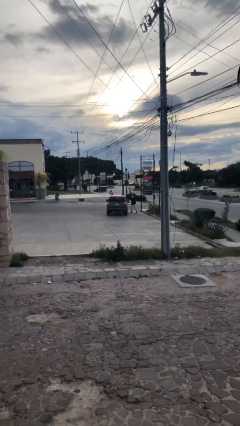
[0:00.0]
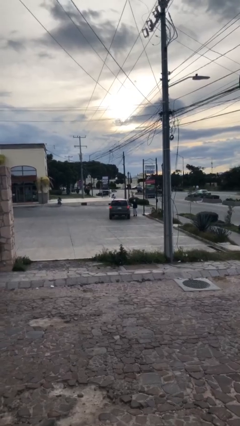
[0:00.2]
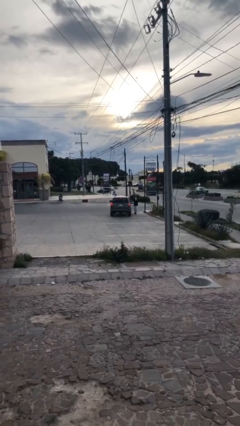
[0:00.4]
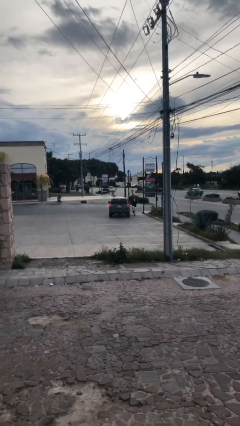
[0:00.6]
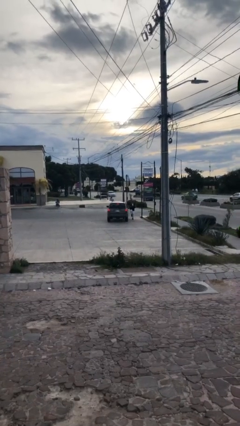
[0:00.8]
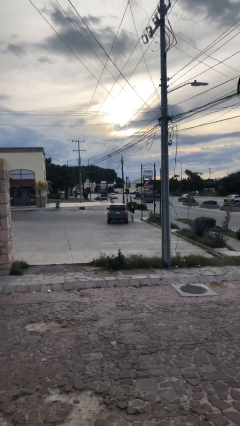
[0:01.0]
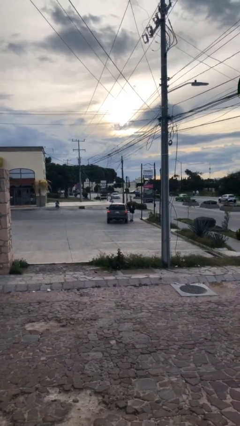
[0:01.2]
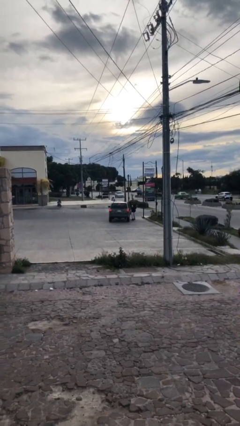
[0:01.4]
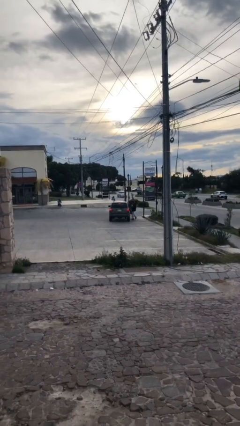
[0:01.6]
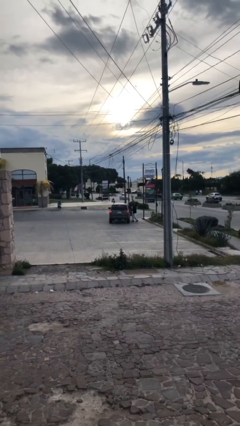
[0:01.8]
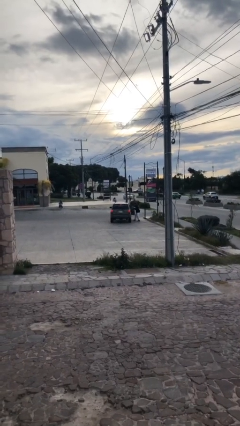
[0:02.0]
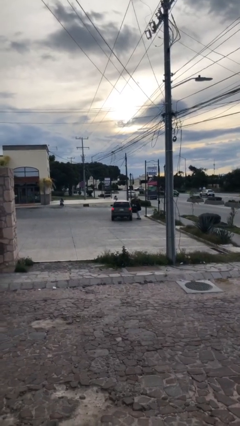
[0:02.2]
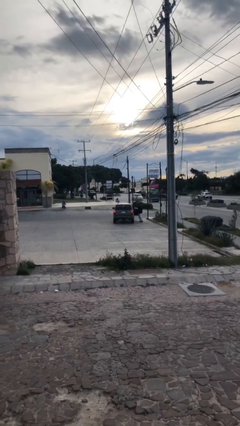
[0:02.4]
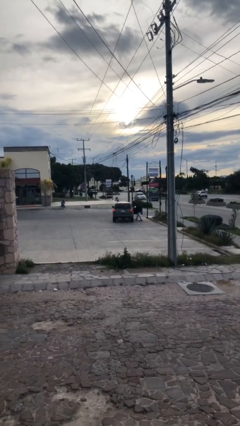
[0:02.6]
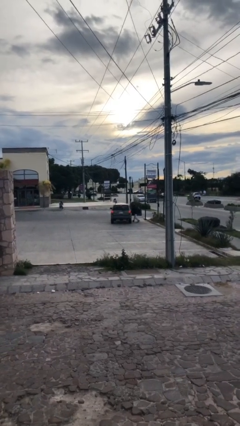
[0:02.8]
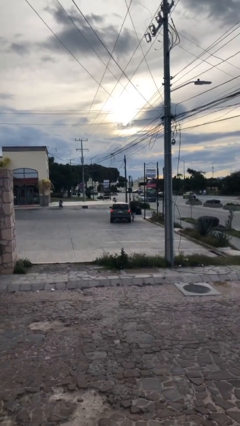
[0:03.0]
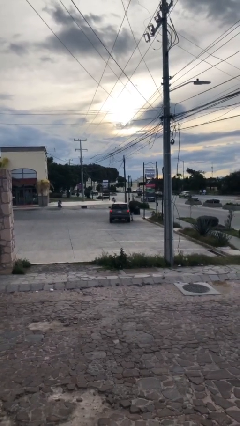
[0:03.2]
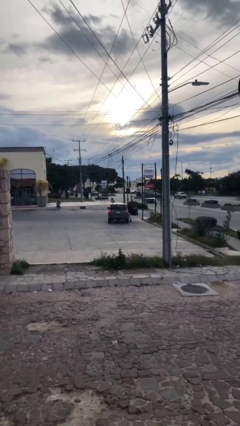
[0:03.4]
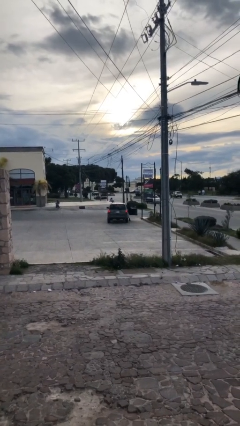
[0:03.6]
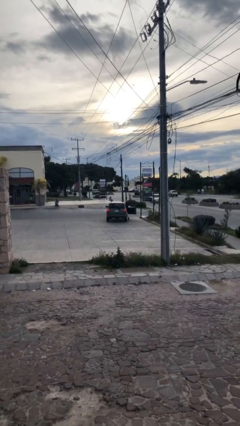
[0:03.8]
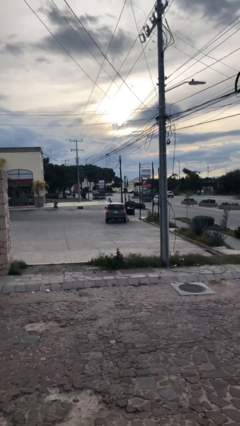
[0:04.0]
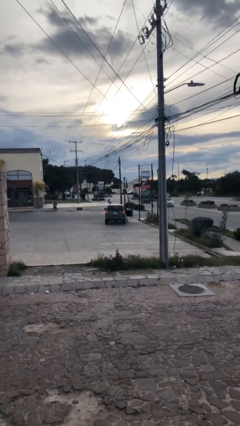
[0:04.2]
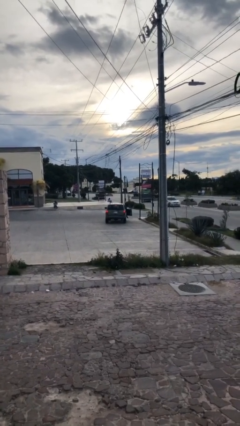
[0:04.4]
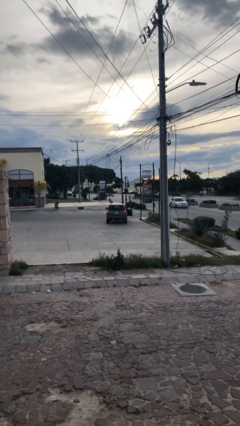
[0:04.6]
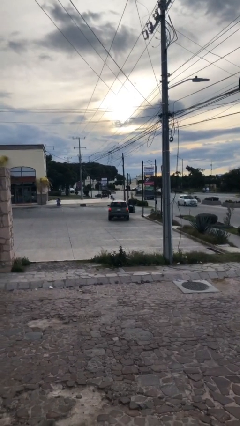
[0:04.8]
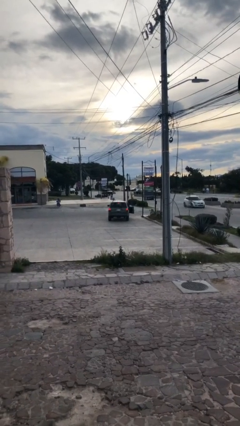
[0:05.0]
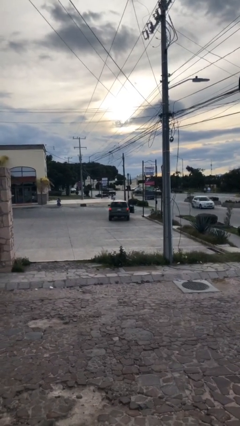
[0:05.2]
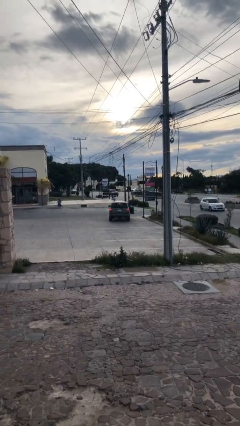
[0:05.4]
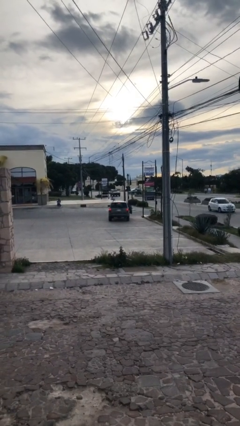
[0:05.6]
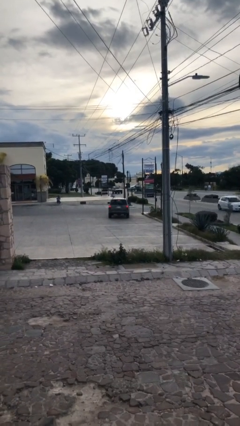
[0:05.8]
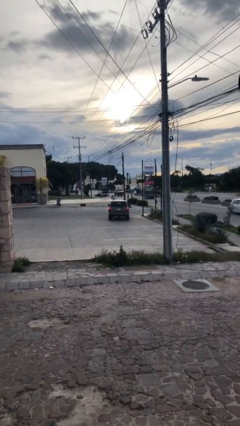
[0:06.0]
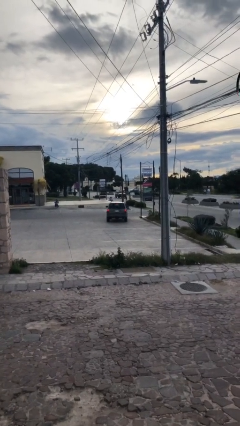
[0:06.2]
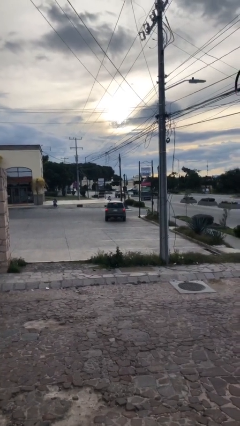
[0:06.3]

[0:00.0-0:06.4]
car picks up person

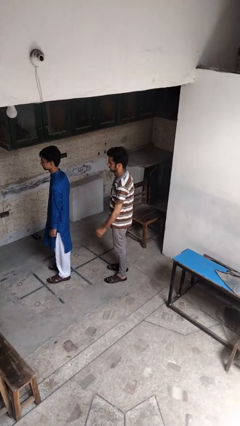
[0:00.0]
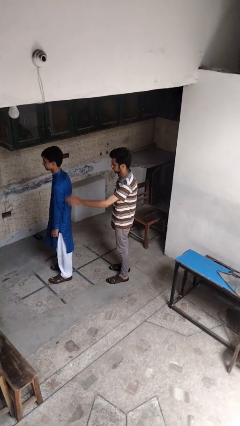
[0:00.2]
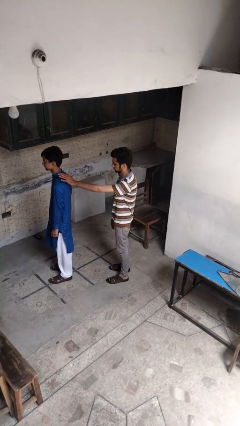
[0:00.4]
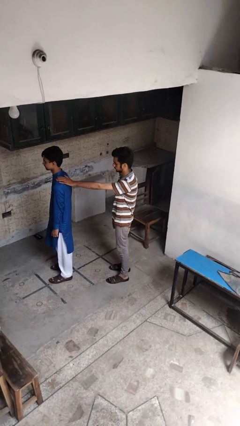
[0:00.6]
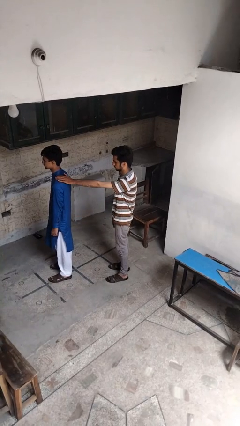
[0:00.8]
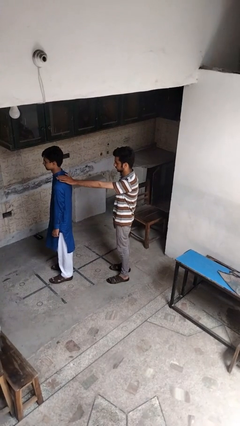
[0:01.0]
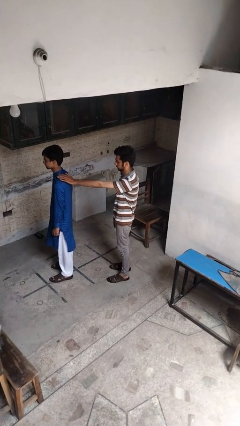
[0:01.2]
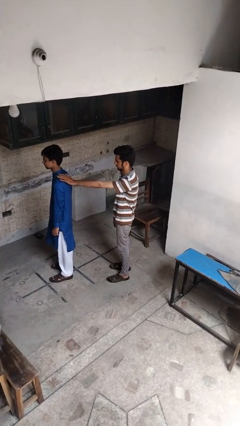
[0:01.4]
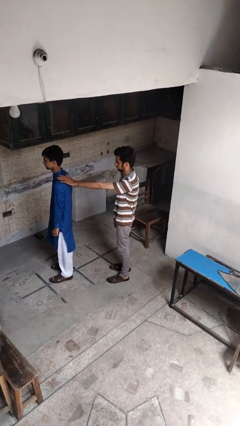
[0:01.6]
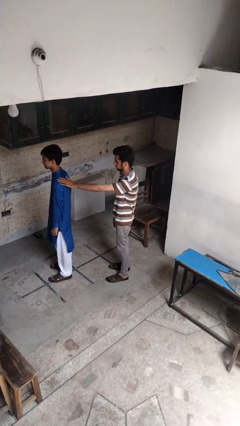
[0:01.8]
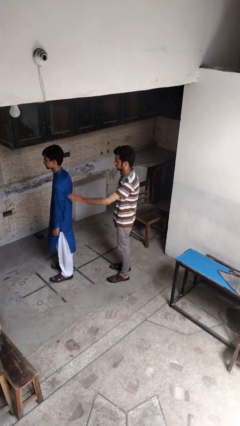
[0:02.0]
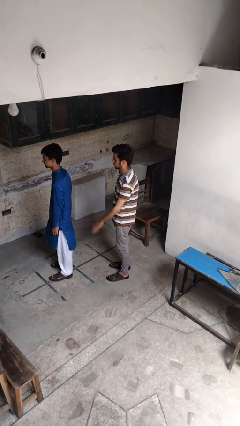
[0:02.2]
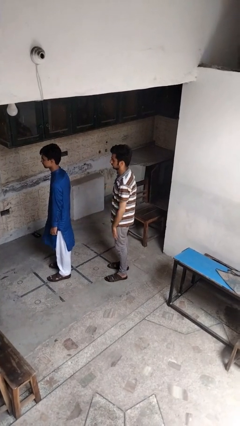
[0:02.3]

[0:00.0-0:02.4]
person touches back of person

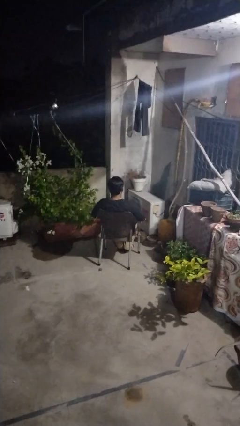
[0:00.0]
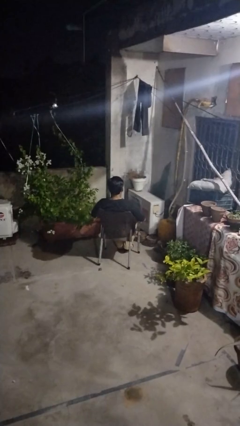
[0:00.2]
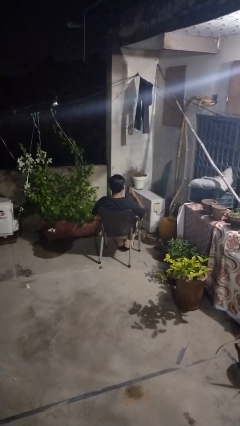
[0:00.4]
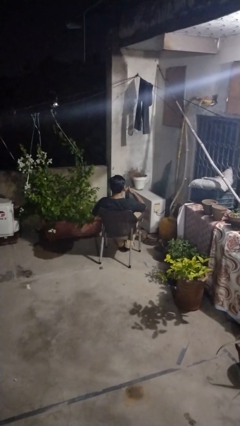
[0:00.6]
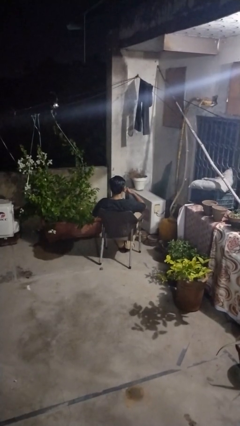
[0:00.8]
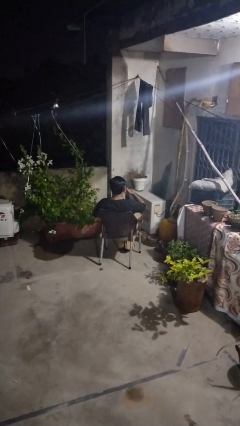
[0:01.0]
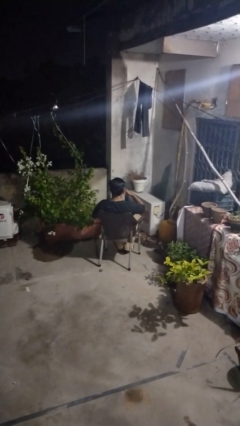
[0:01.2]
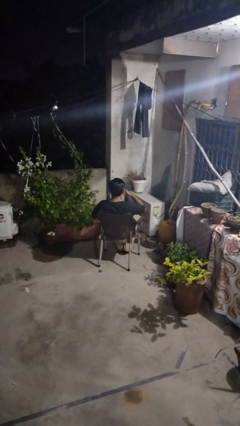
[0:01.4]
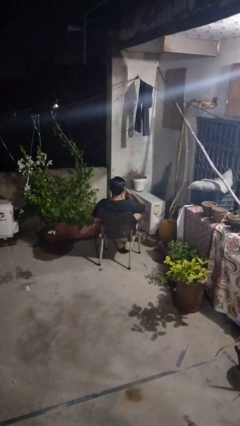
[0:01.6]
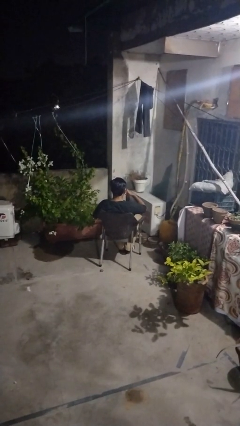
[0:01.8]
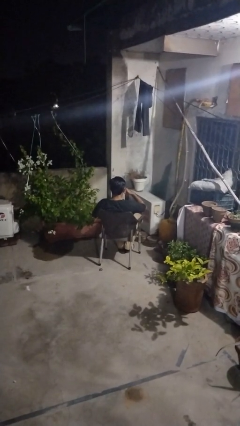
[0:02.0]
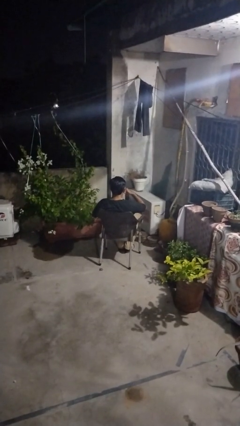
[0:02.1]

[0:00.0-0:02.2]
person gestures call me

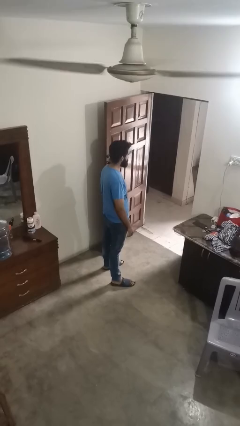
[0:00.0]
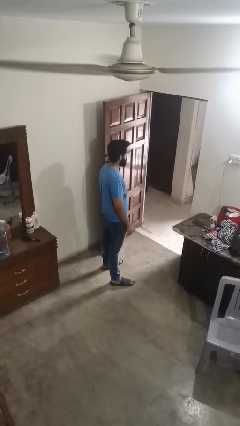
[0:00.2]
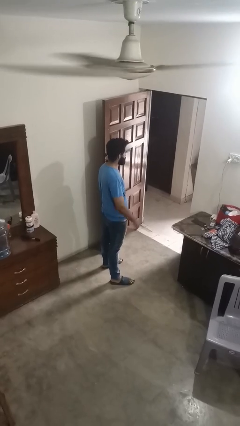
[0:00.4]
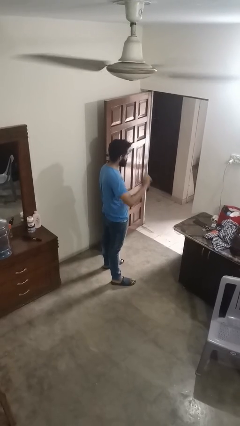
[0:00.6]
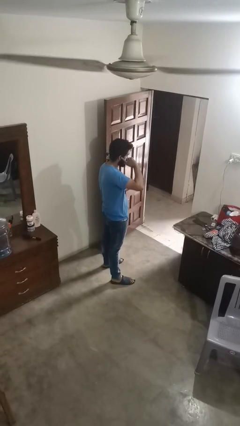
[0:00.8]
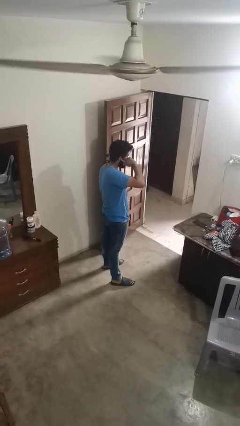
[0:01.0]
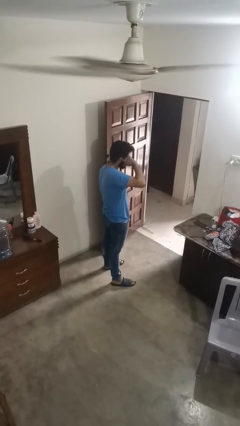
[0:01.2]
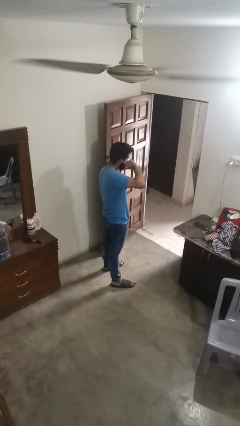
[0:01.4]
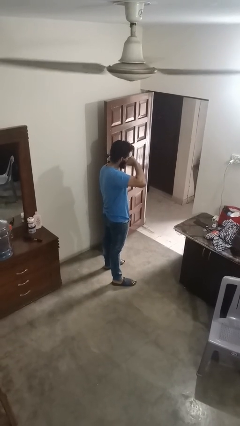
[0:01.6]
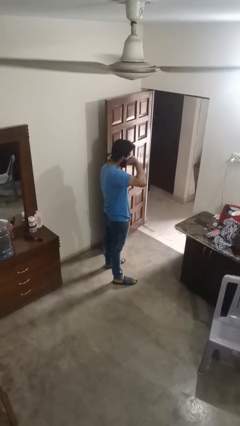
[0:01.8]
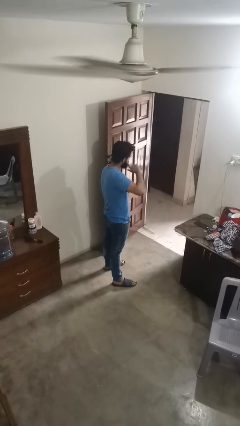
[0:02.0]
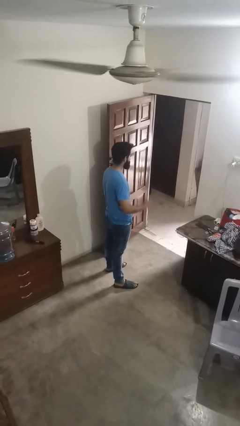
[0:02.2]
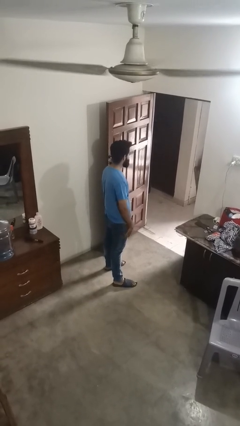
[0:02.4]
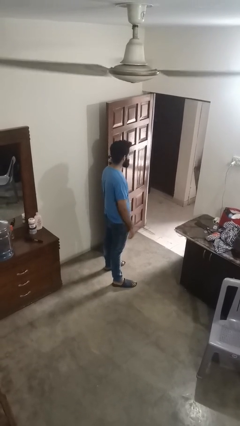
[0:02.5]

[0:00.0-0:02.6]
person touches earlobe

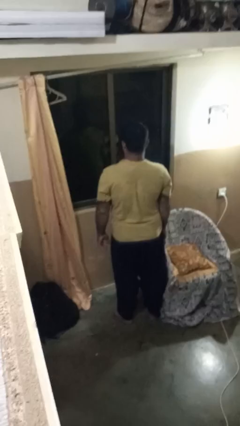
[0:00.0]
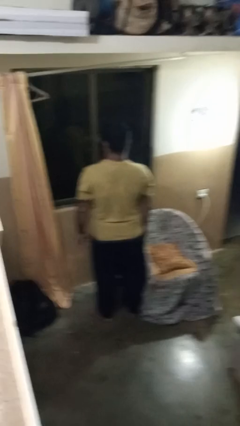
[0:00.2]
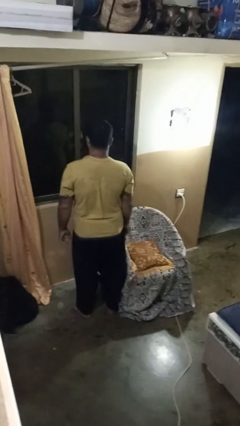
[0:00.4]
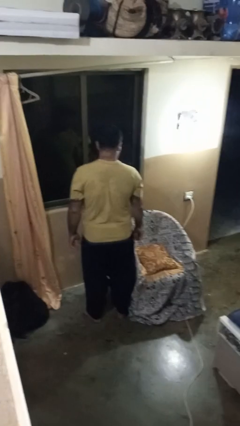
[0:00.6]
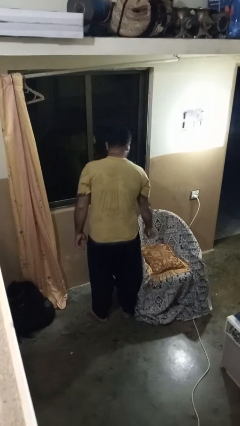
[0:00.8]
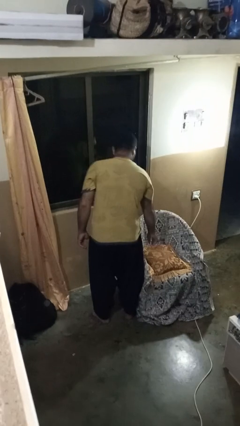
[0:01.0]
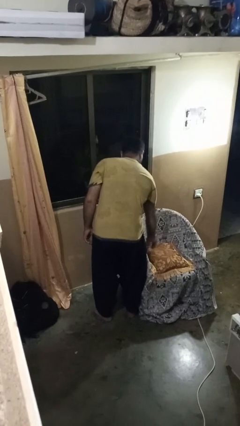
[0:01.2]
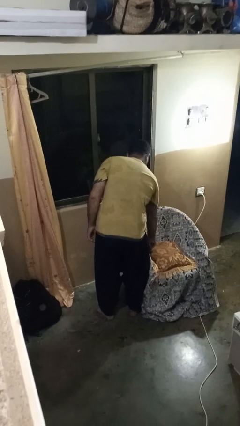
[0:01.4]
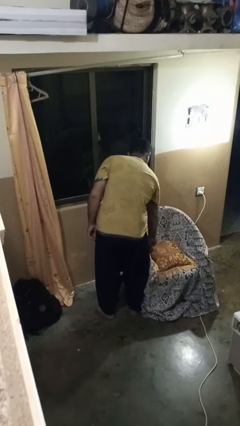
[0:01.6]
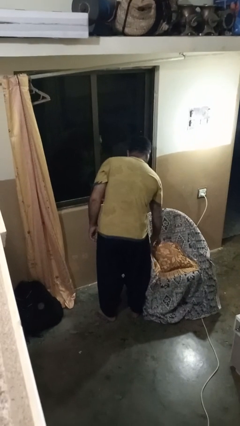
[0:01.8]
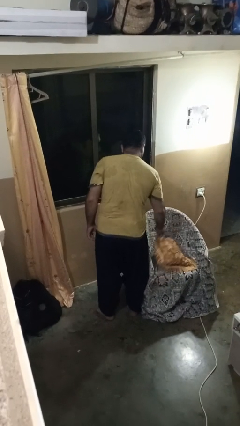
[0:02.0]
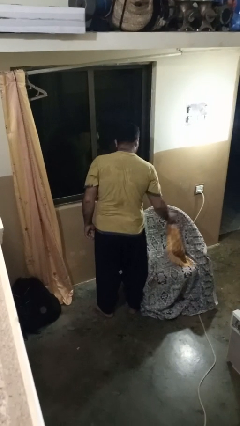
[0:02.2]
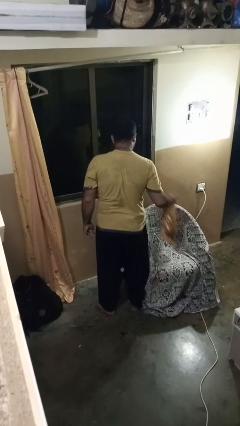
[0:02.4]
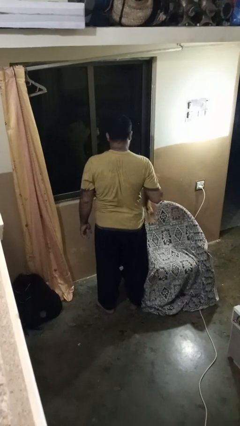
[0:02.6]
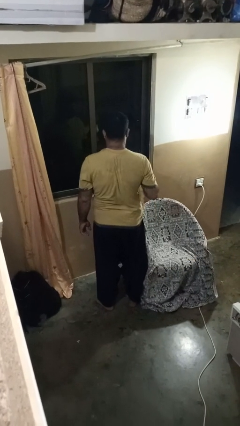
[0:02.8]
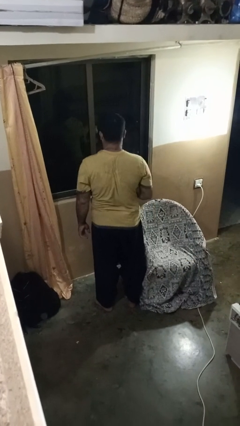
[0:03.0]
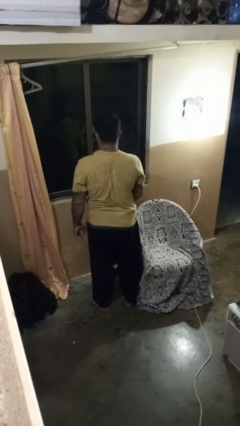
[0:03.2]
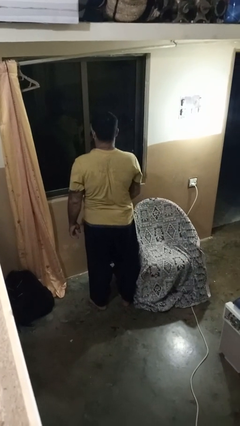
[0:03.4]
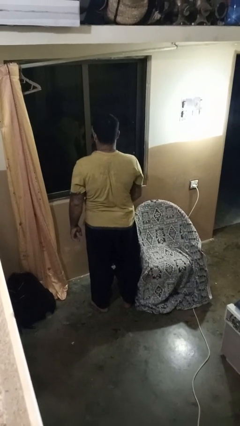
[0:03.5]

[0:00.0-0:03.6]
person picks up object from couch

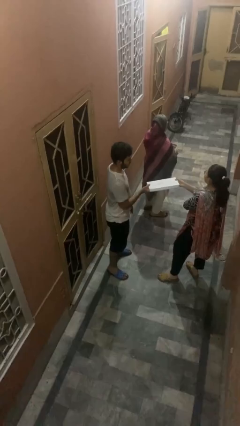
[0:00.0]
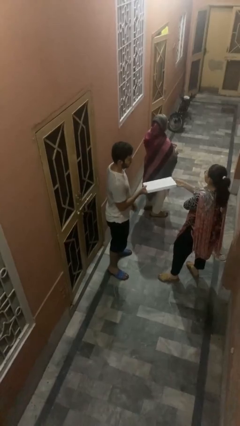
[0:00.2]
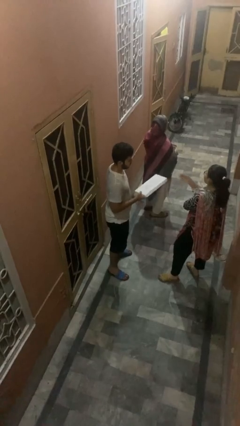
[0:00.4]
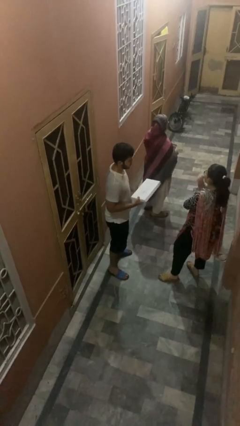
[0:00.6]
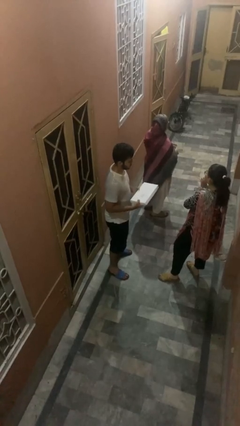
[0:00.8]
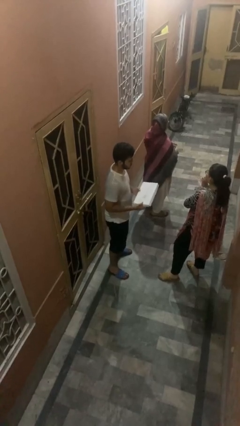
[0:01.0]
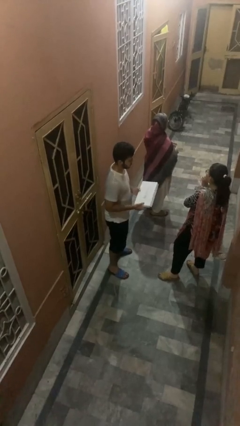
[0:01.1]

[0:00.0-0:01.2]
person transfers object to person
